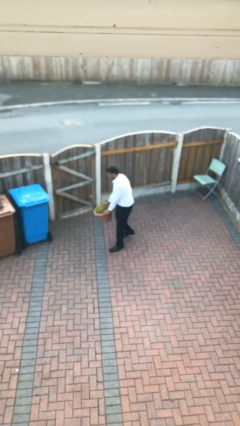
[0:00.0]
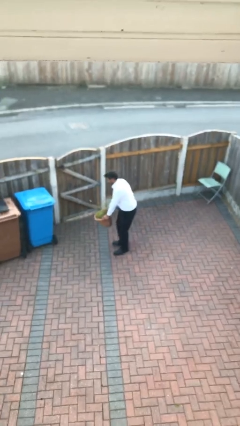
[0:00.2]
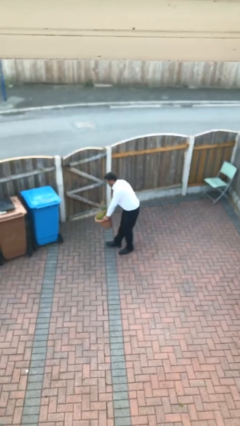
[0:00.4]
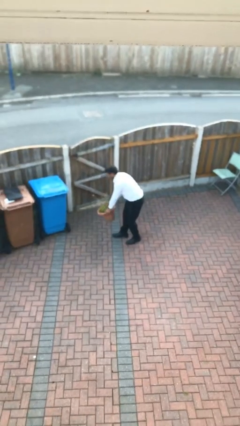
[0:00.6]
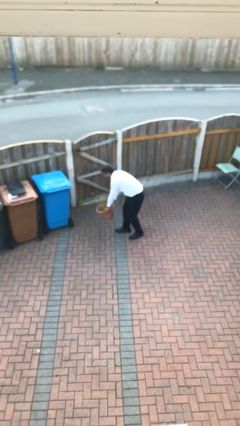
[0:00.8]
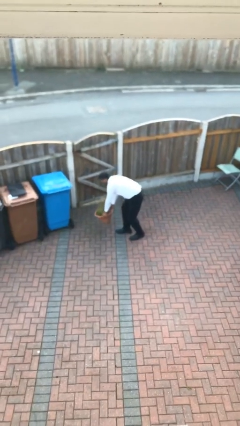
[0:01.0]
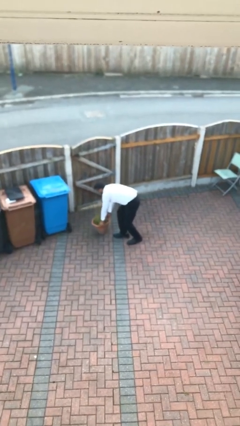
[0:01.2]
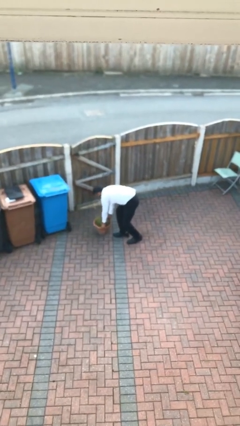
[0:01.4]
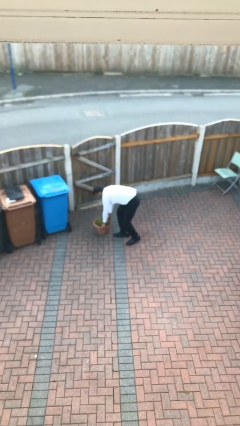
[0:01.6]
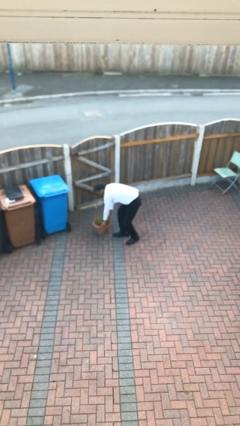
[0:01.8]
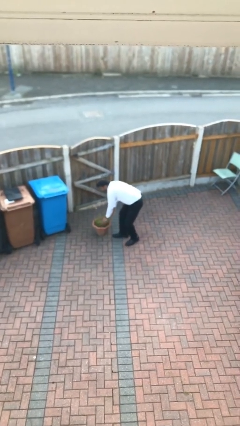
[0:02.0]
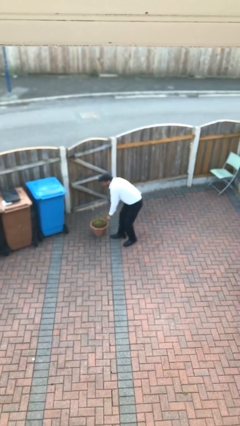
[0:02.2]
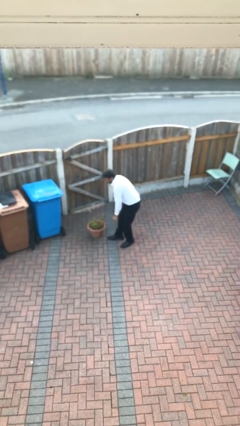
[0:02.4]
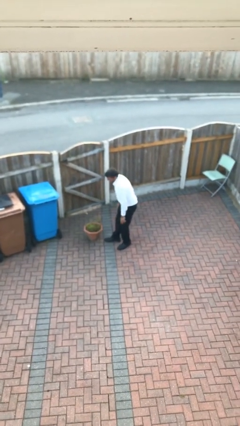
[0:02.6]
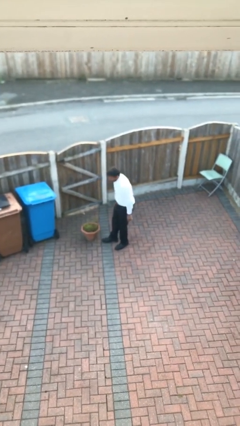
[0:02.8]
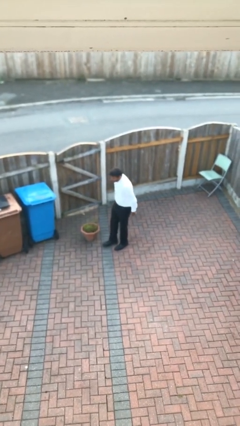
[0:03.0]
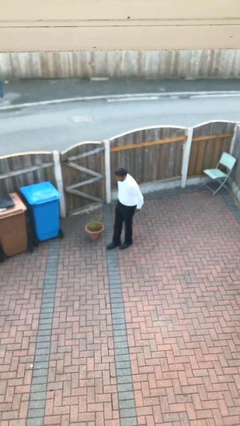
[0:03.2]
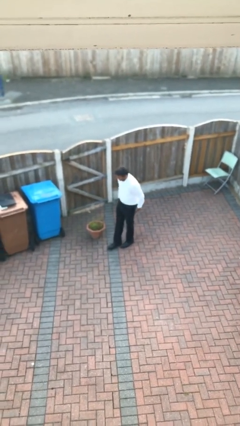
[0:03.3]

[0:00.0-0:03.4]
person puts down object on floor

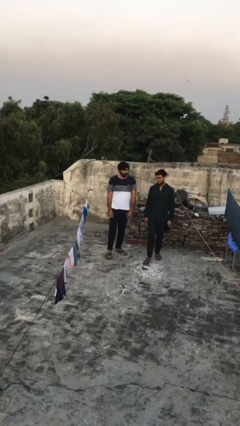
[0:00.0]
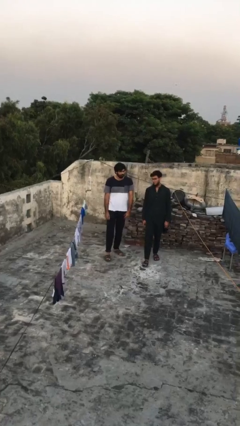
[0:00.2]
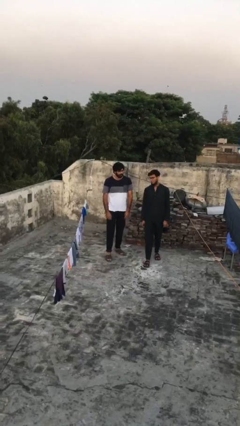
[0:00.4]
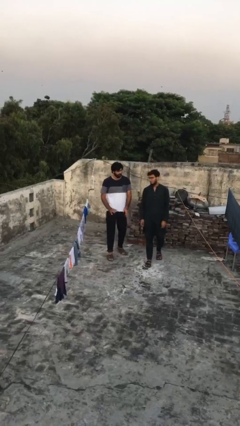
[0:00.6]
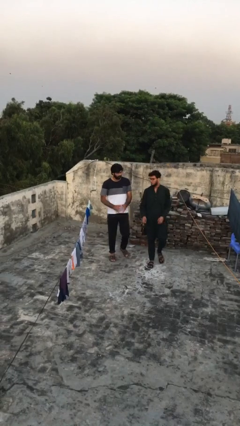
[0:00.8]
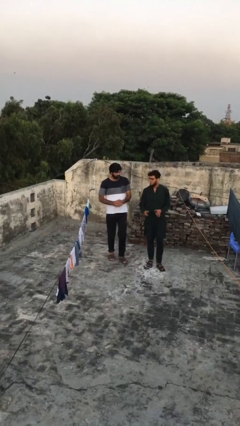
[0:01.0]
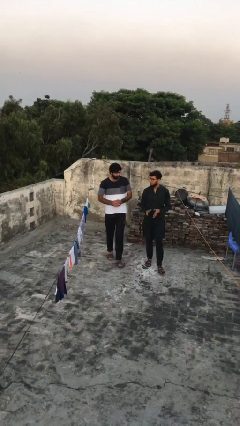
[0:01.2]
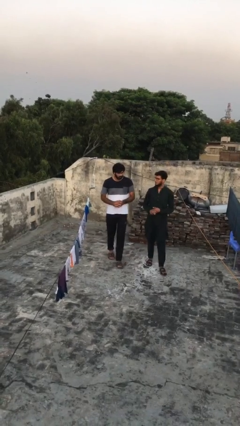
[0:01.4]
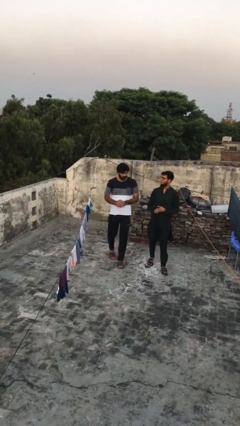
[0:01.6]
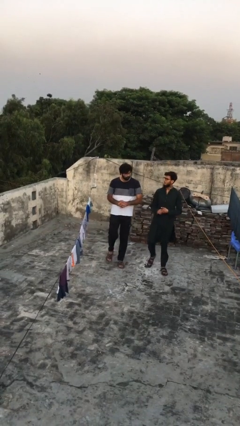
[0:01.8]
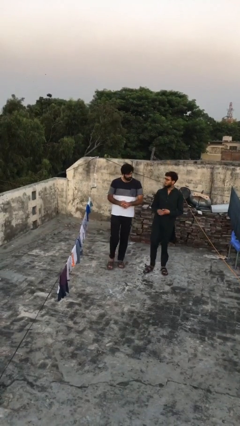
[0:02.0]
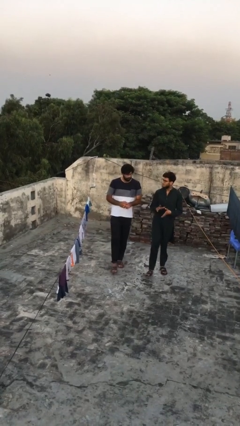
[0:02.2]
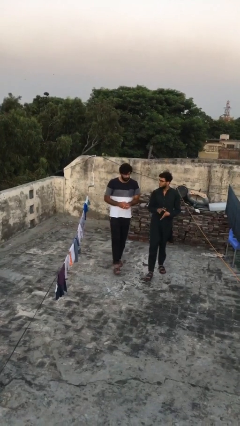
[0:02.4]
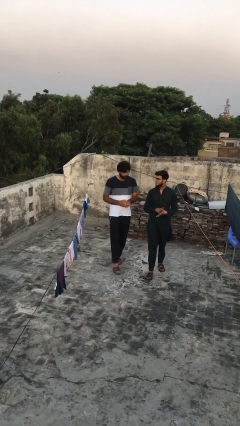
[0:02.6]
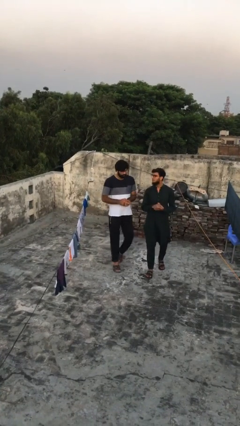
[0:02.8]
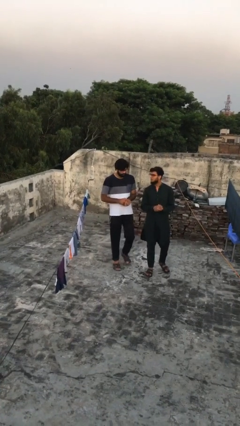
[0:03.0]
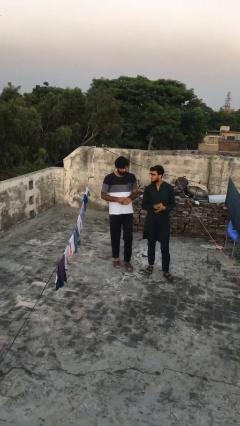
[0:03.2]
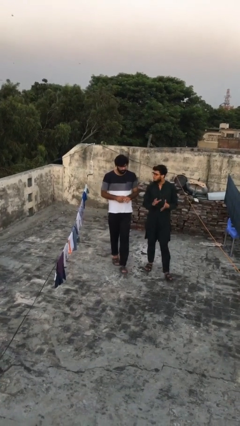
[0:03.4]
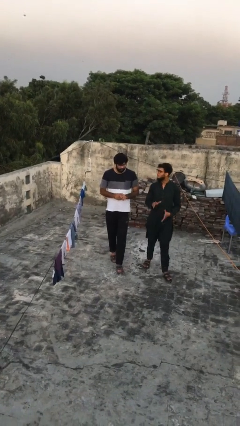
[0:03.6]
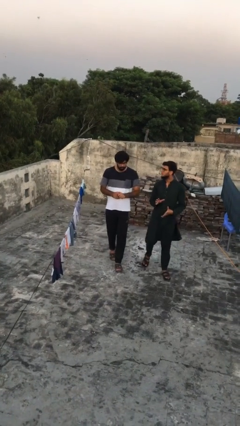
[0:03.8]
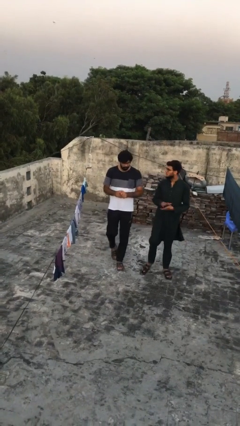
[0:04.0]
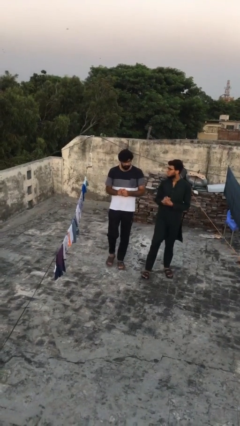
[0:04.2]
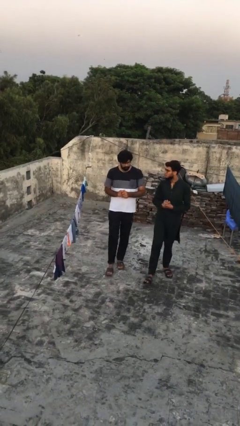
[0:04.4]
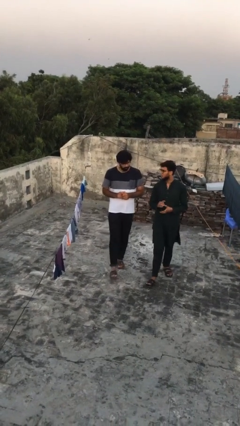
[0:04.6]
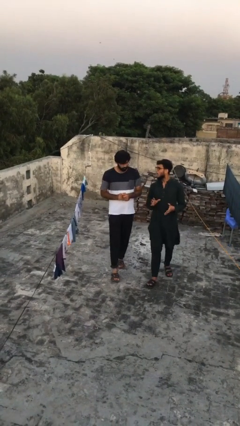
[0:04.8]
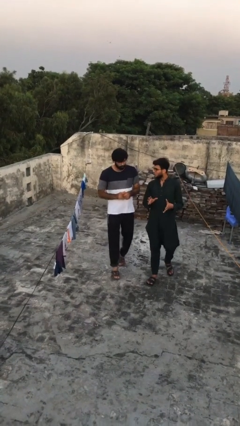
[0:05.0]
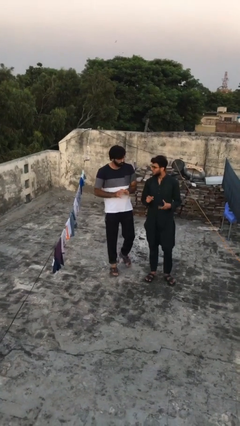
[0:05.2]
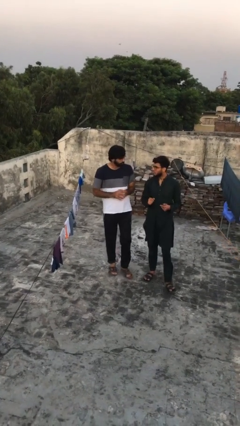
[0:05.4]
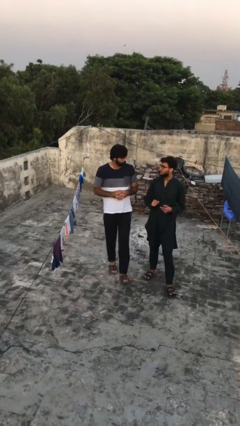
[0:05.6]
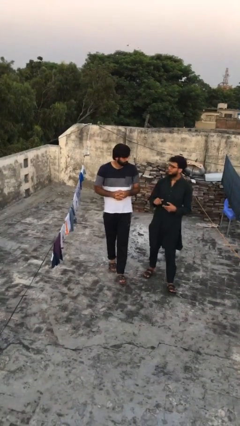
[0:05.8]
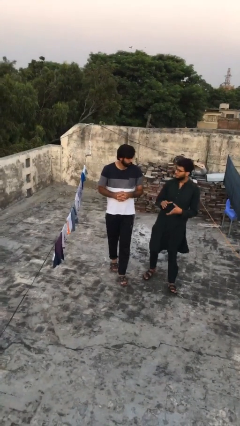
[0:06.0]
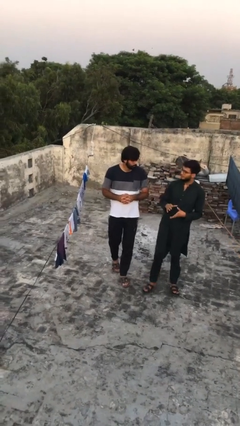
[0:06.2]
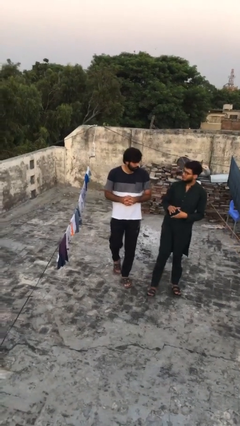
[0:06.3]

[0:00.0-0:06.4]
person talks to person

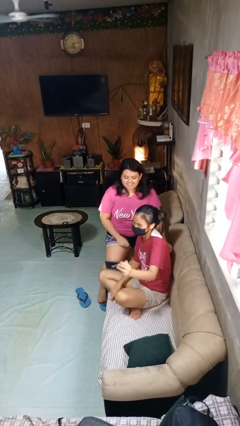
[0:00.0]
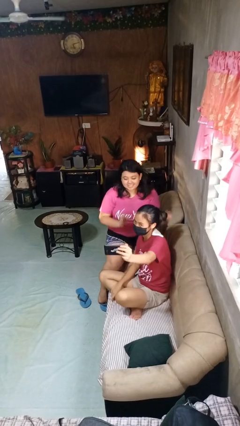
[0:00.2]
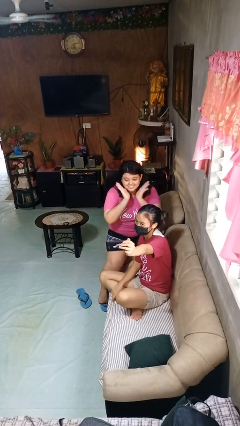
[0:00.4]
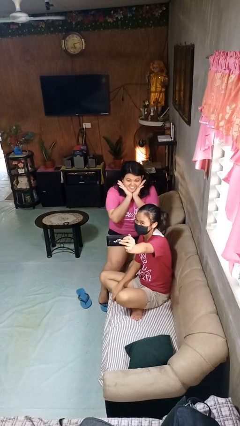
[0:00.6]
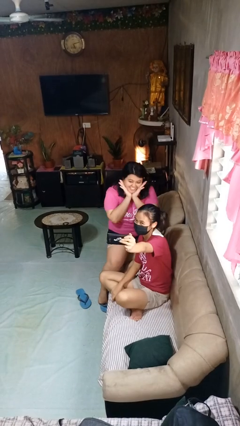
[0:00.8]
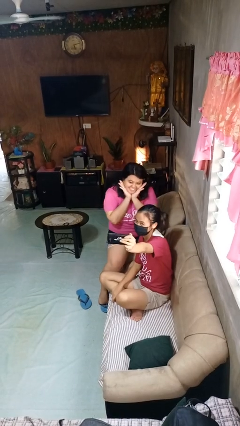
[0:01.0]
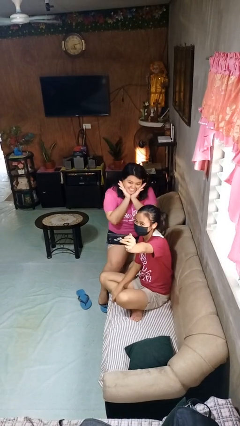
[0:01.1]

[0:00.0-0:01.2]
person takes selfie with person

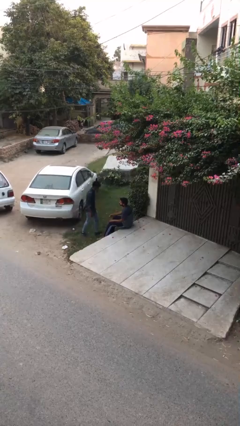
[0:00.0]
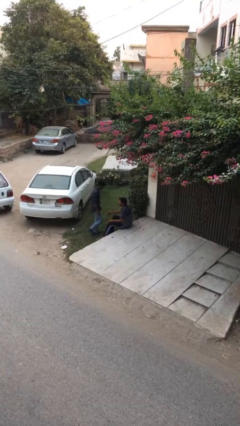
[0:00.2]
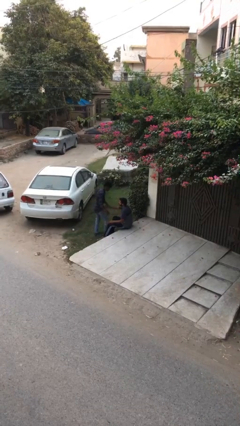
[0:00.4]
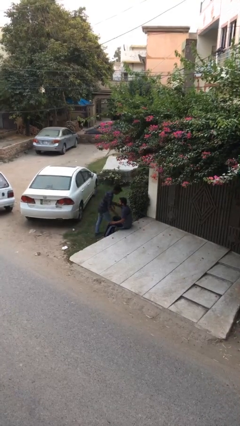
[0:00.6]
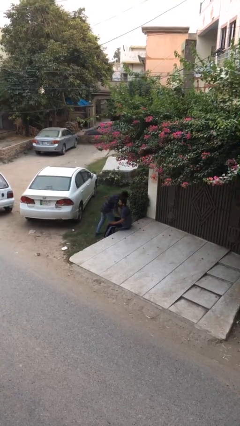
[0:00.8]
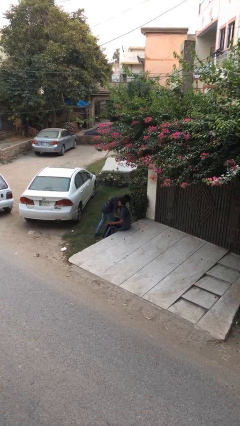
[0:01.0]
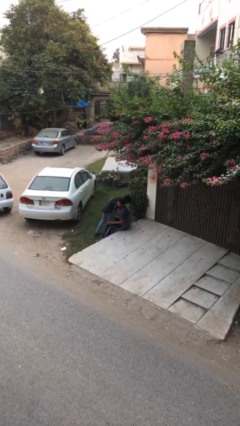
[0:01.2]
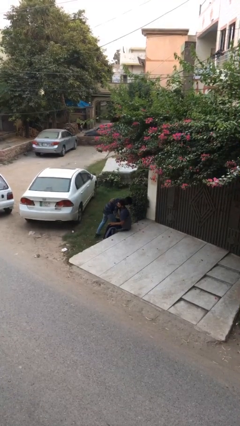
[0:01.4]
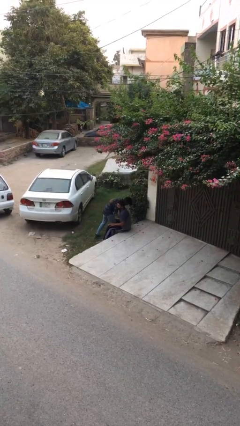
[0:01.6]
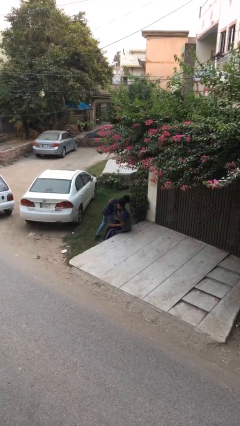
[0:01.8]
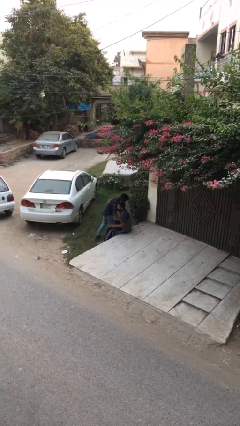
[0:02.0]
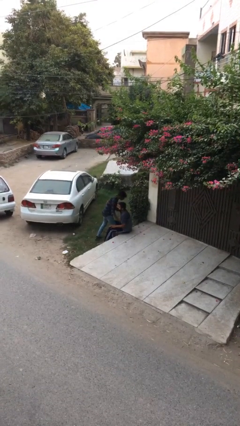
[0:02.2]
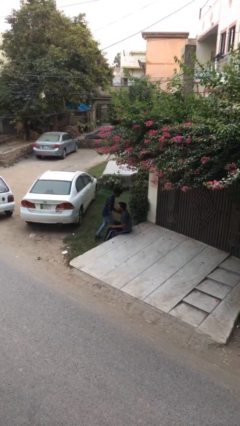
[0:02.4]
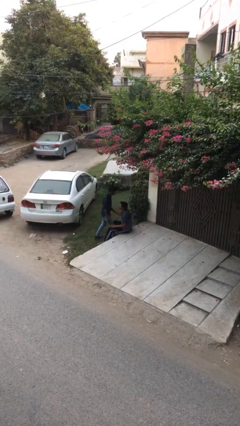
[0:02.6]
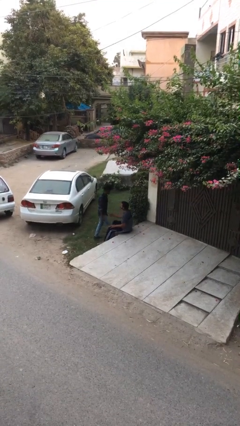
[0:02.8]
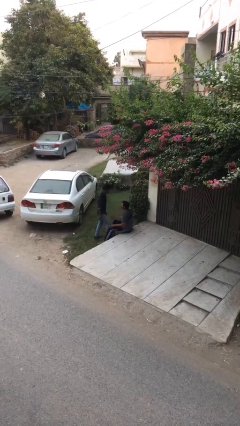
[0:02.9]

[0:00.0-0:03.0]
person embraces person

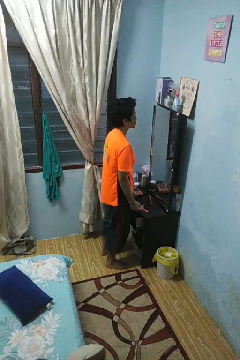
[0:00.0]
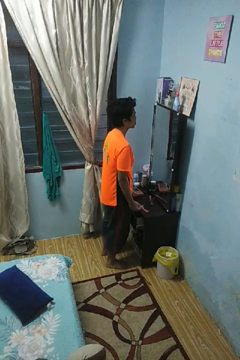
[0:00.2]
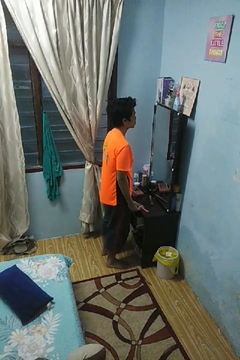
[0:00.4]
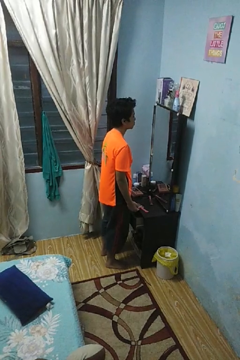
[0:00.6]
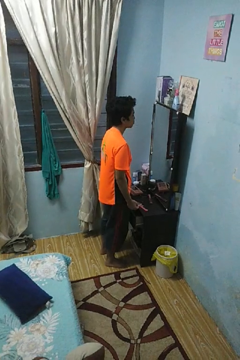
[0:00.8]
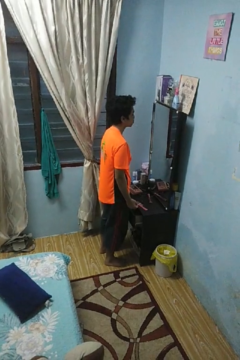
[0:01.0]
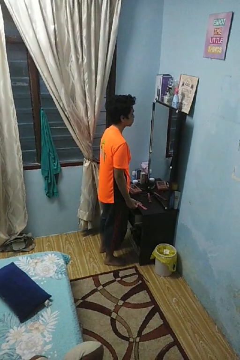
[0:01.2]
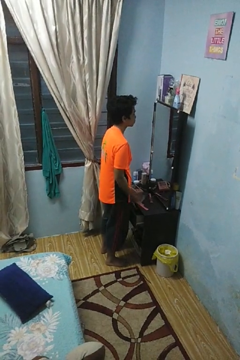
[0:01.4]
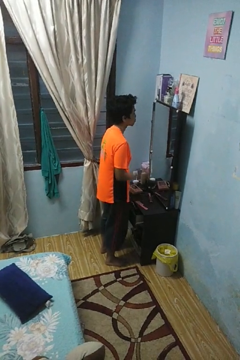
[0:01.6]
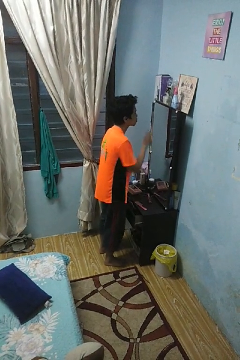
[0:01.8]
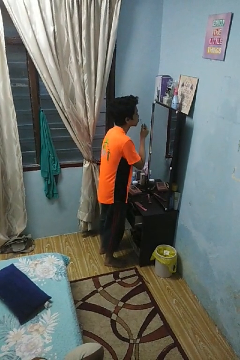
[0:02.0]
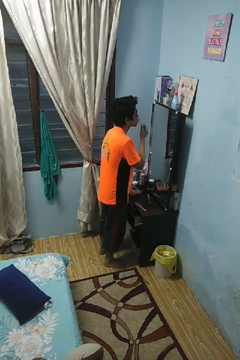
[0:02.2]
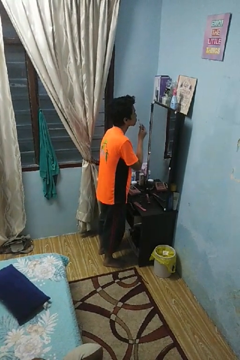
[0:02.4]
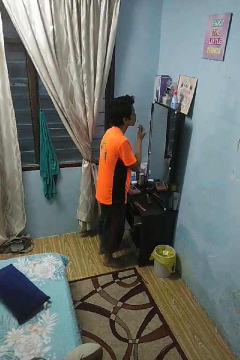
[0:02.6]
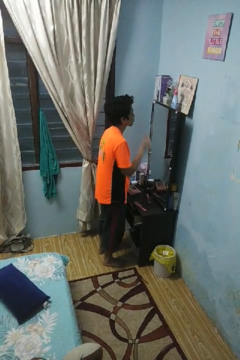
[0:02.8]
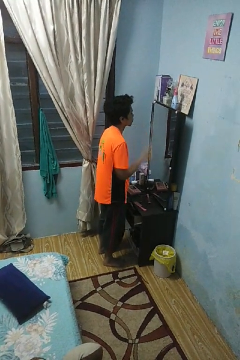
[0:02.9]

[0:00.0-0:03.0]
person applies lip makeup

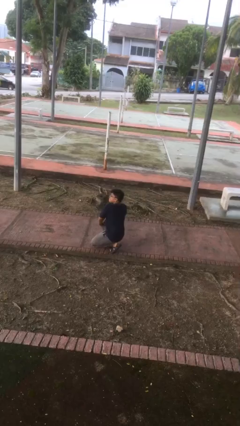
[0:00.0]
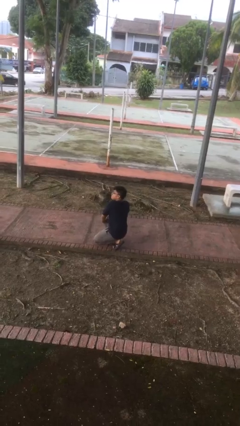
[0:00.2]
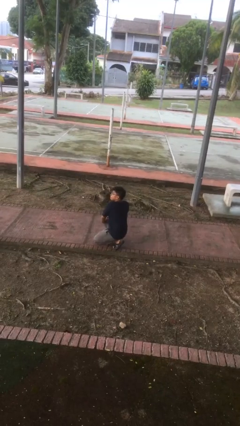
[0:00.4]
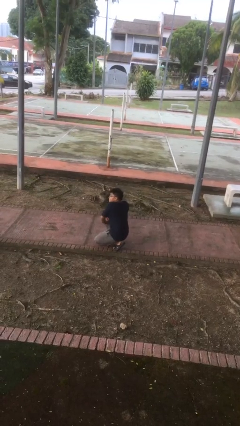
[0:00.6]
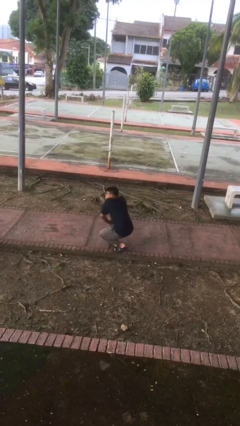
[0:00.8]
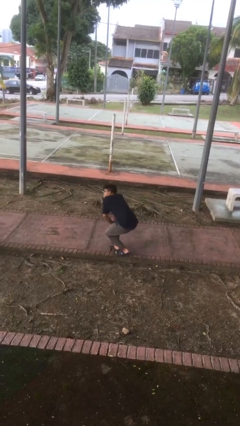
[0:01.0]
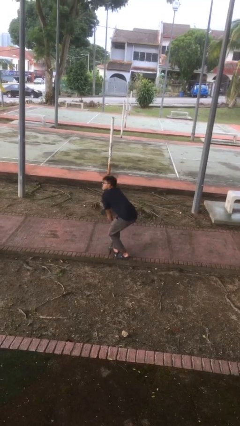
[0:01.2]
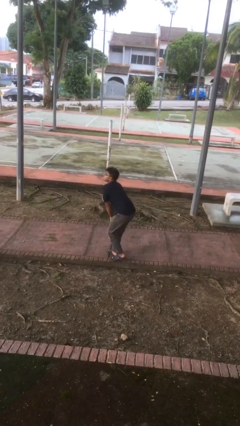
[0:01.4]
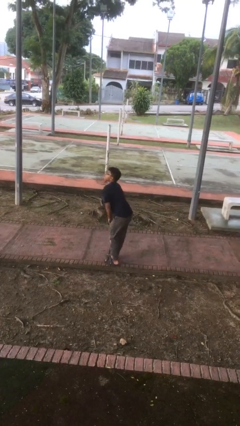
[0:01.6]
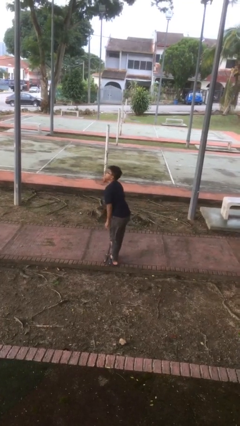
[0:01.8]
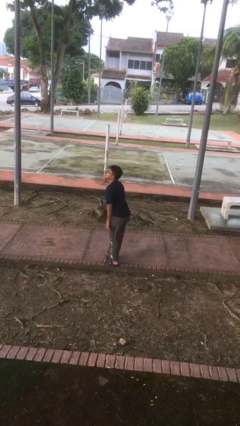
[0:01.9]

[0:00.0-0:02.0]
person stands up from floor
